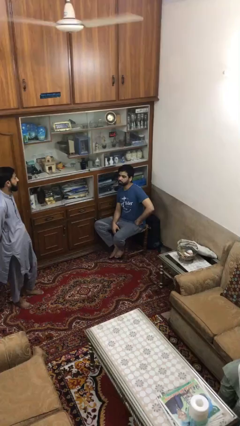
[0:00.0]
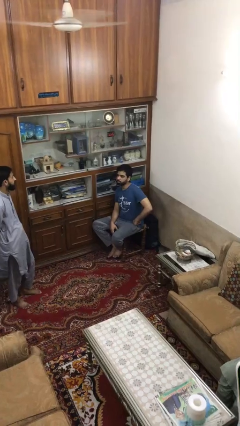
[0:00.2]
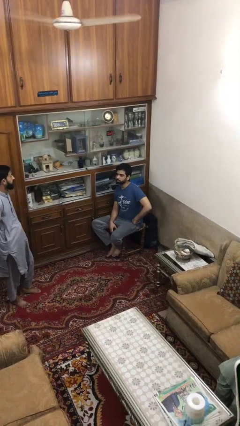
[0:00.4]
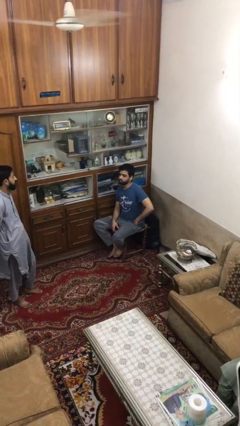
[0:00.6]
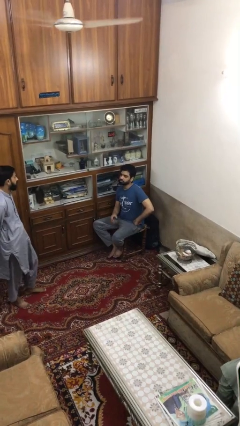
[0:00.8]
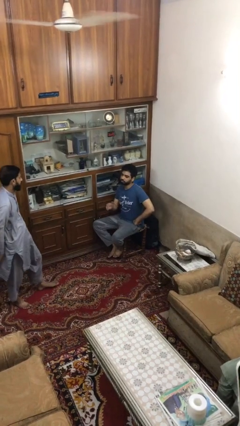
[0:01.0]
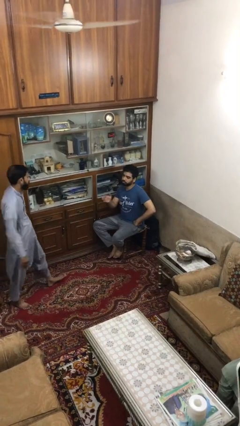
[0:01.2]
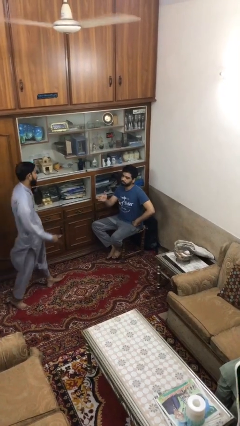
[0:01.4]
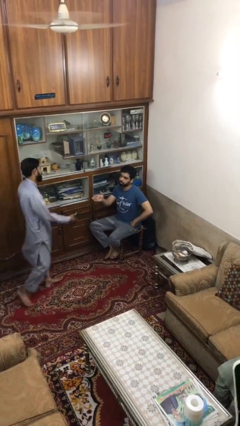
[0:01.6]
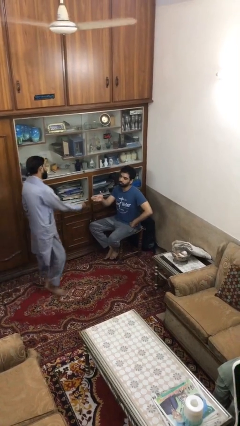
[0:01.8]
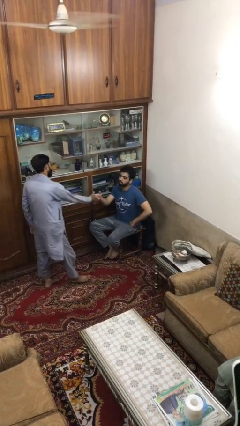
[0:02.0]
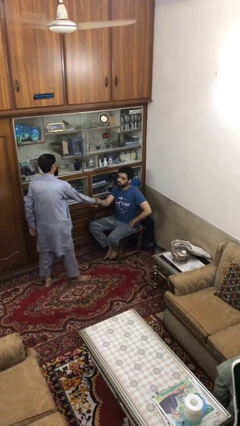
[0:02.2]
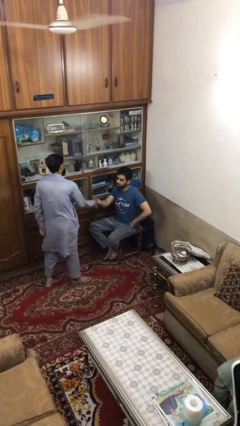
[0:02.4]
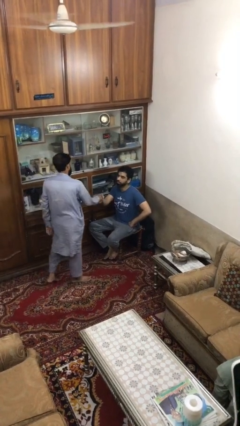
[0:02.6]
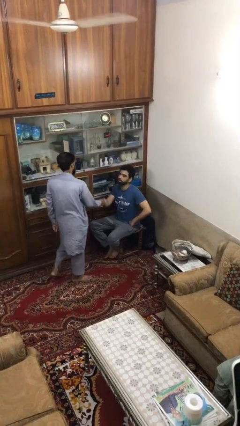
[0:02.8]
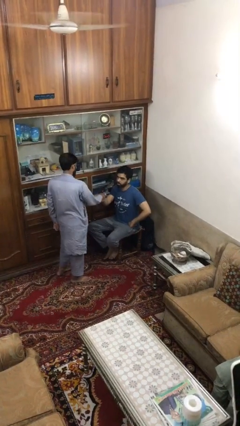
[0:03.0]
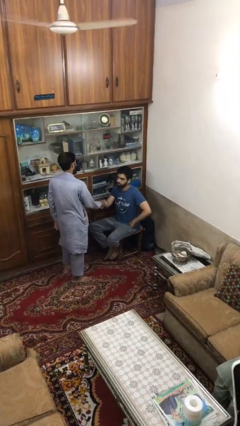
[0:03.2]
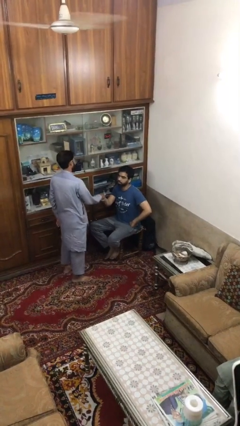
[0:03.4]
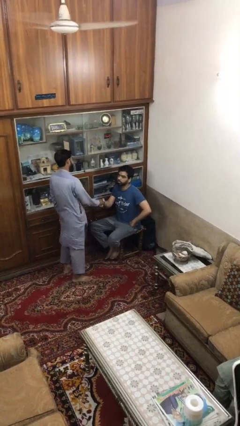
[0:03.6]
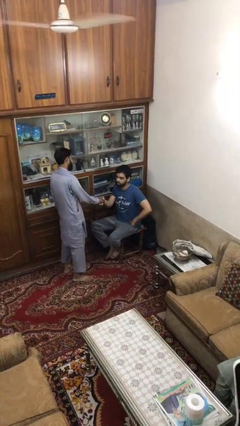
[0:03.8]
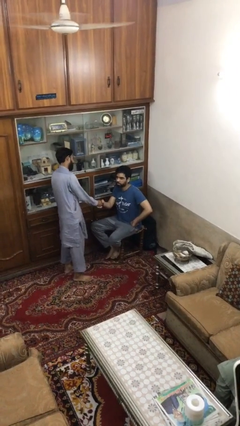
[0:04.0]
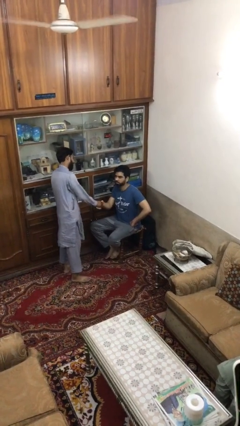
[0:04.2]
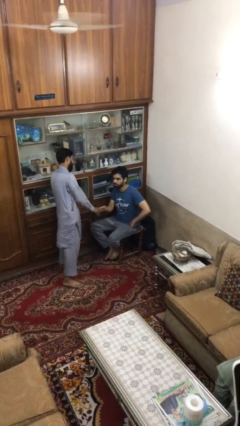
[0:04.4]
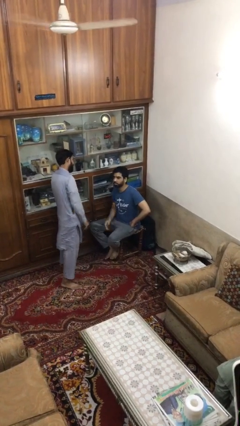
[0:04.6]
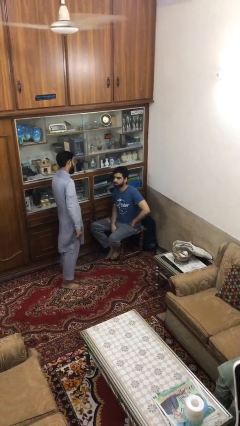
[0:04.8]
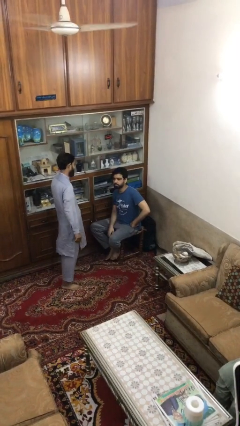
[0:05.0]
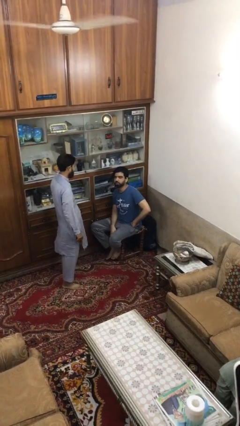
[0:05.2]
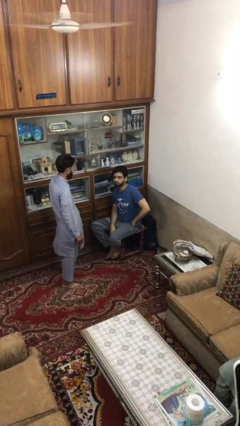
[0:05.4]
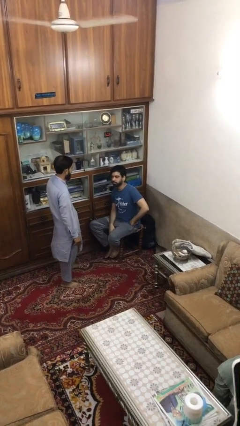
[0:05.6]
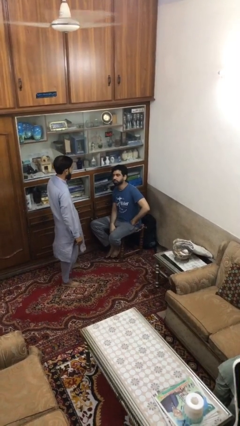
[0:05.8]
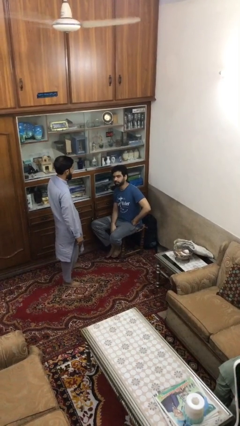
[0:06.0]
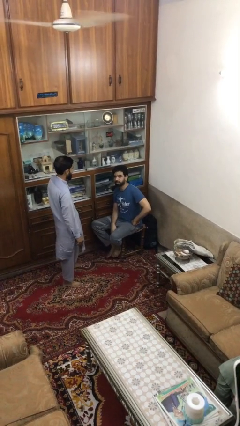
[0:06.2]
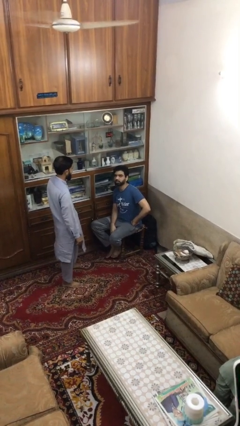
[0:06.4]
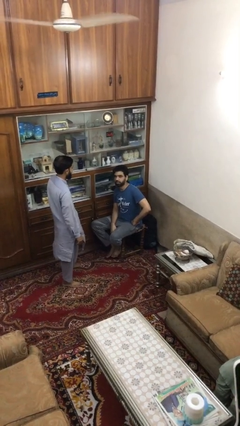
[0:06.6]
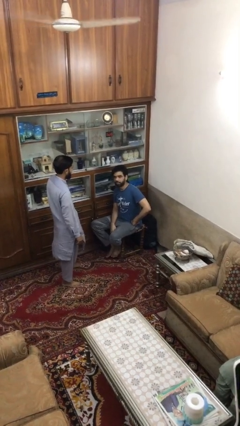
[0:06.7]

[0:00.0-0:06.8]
person shakes hand

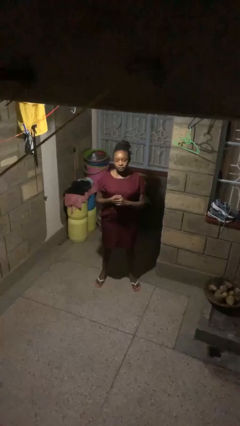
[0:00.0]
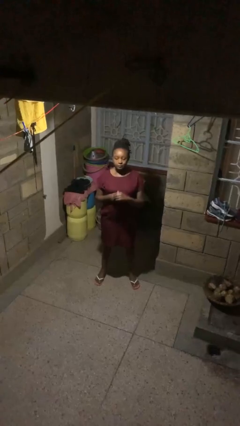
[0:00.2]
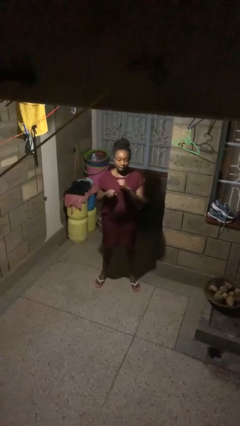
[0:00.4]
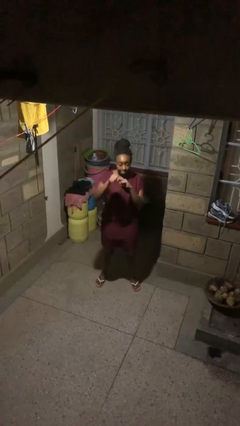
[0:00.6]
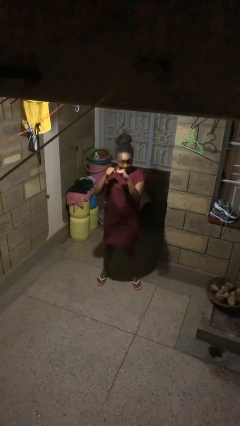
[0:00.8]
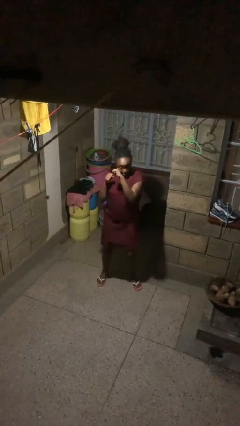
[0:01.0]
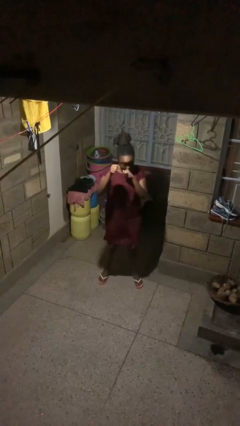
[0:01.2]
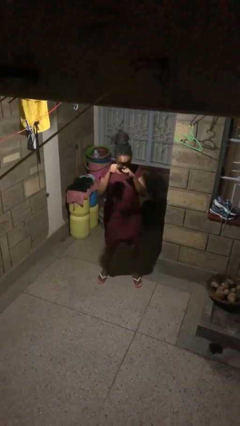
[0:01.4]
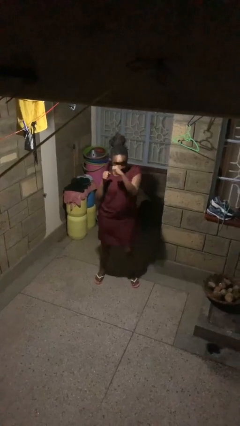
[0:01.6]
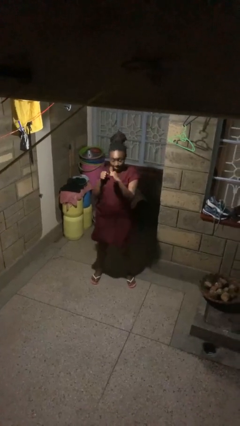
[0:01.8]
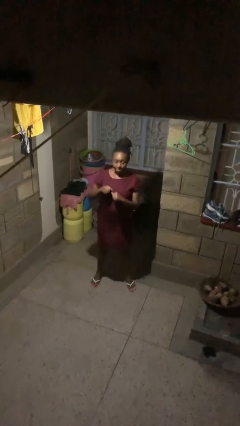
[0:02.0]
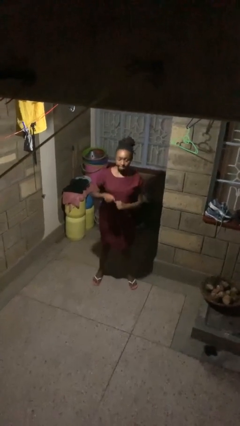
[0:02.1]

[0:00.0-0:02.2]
person punches

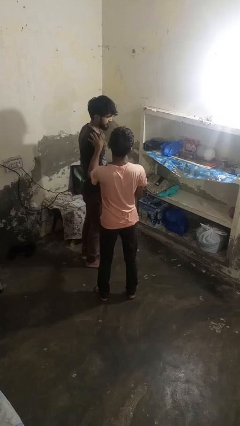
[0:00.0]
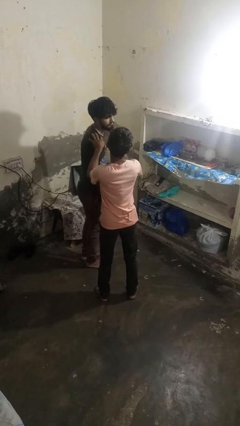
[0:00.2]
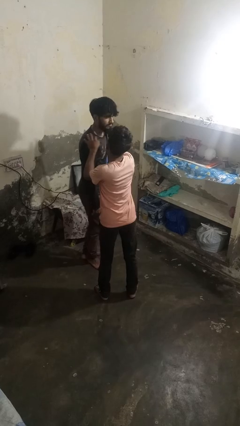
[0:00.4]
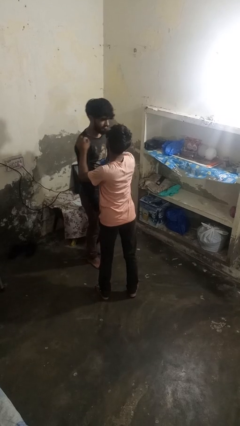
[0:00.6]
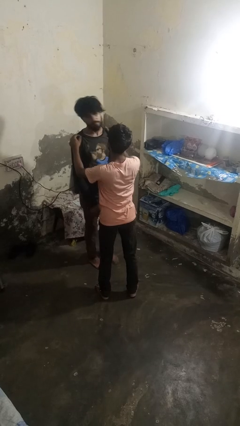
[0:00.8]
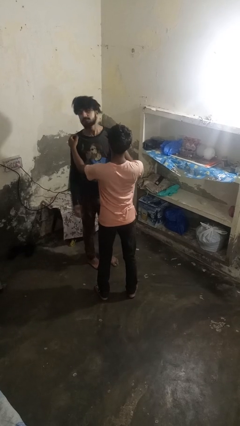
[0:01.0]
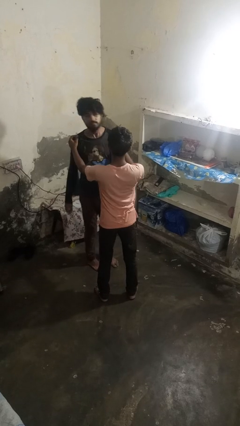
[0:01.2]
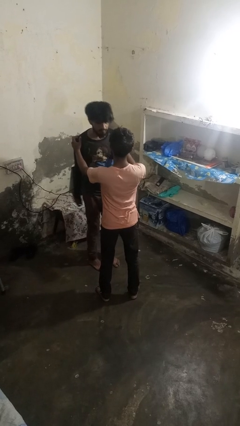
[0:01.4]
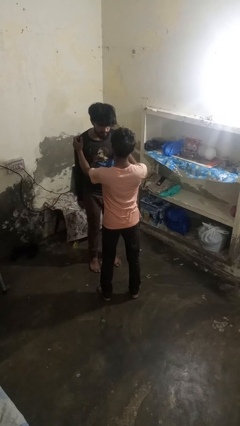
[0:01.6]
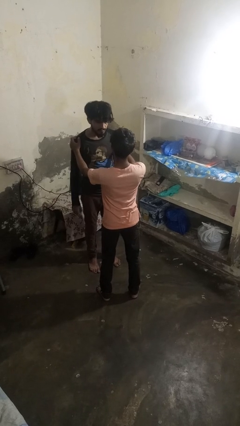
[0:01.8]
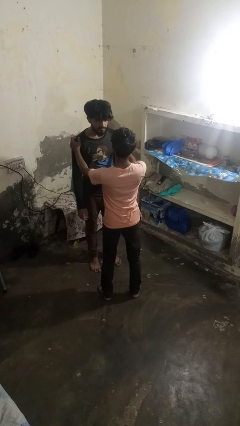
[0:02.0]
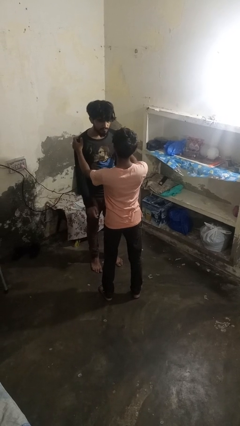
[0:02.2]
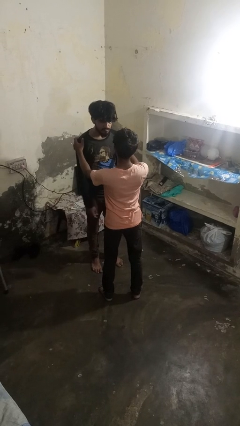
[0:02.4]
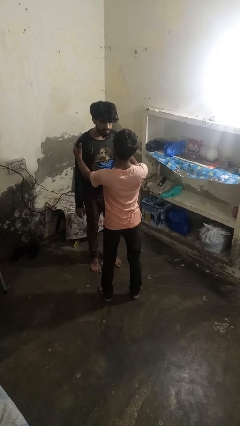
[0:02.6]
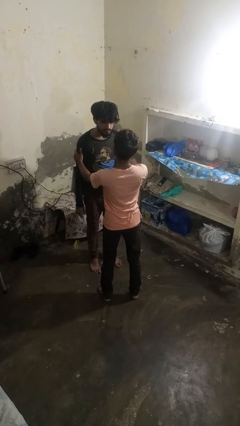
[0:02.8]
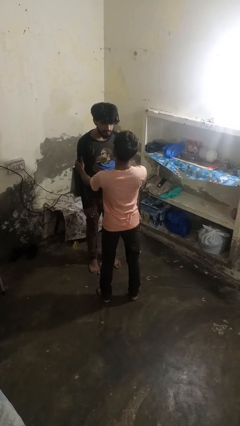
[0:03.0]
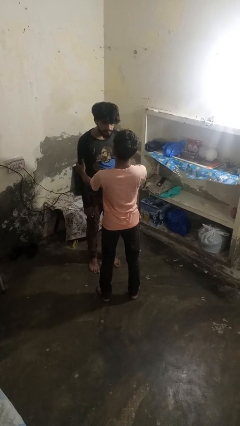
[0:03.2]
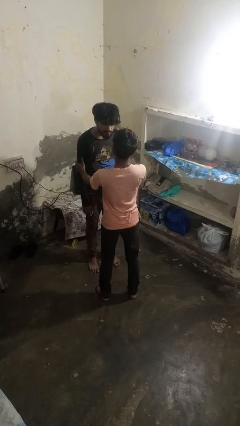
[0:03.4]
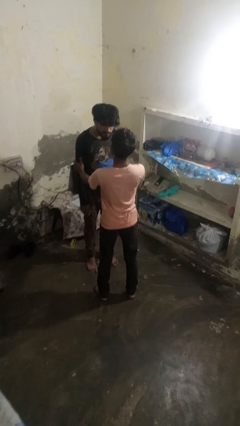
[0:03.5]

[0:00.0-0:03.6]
person spins person around

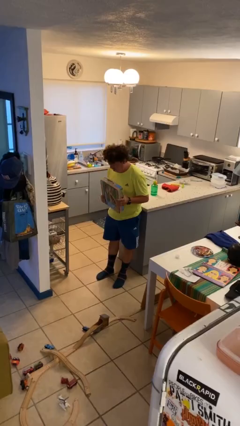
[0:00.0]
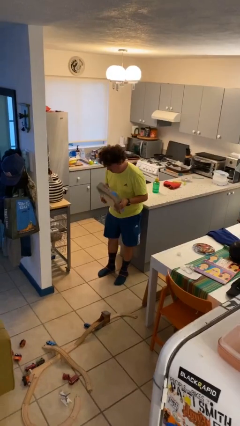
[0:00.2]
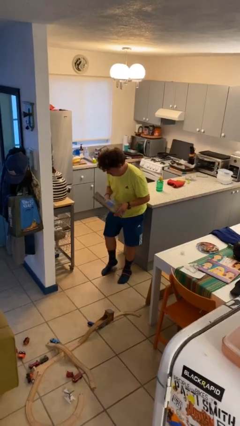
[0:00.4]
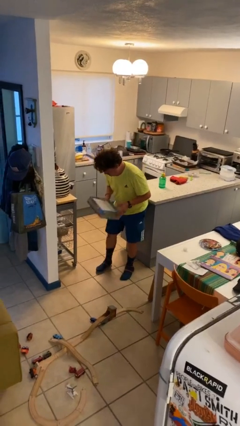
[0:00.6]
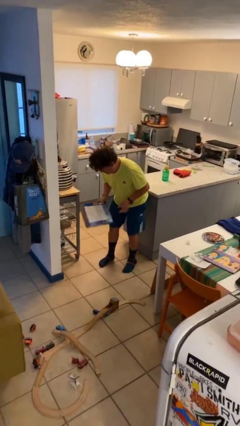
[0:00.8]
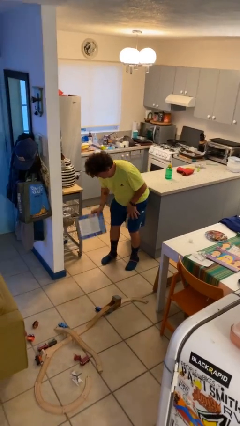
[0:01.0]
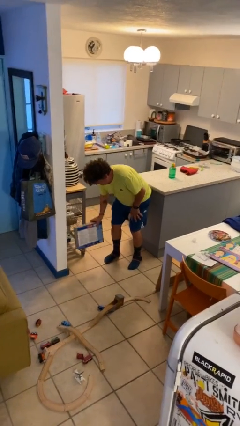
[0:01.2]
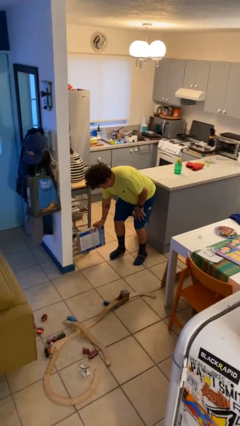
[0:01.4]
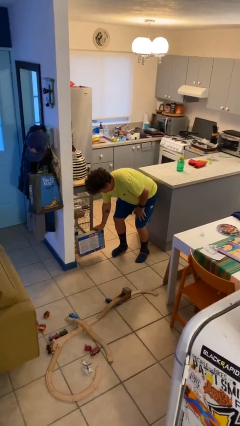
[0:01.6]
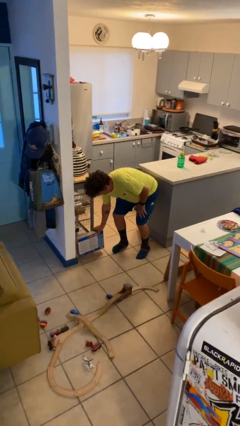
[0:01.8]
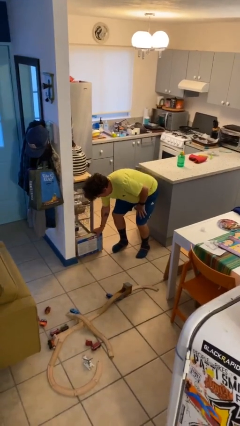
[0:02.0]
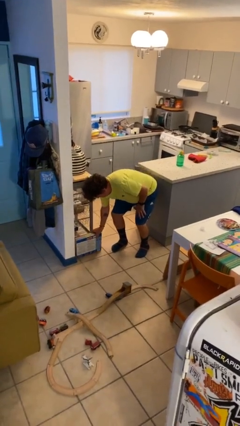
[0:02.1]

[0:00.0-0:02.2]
person puts down object on floor

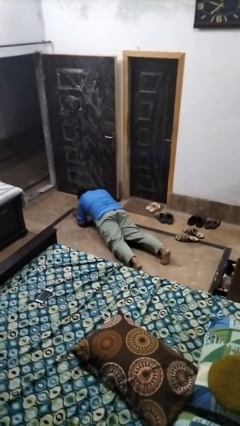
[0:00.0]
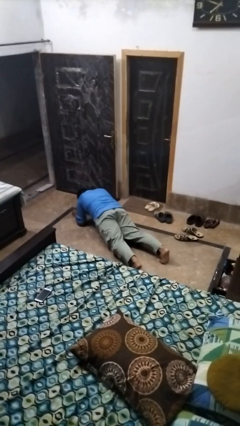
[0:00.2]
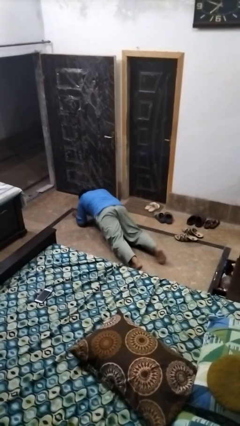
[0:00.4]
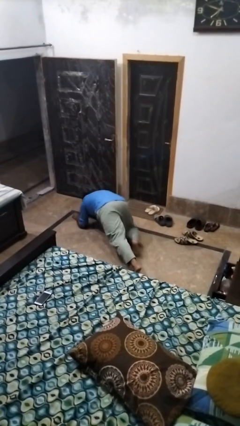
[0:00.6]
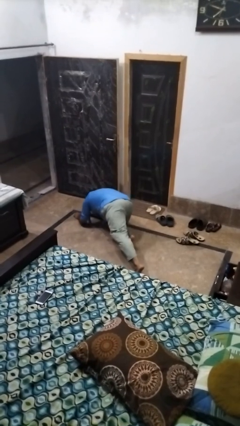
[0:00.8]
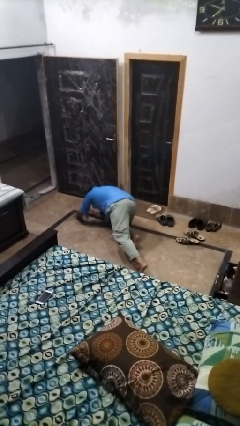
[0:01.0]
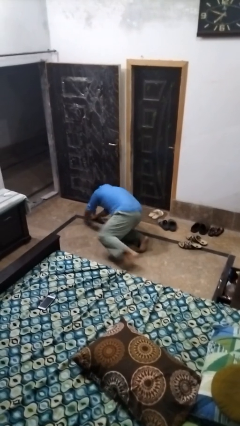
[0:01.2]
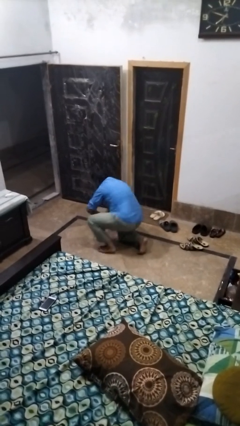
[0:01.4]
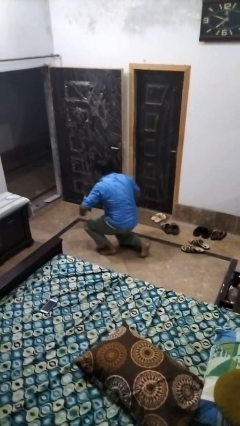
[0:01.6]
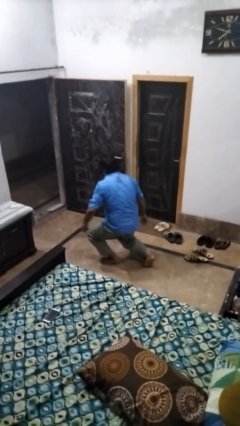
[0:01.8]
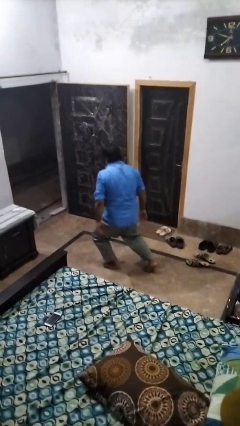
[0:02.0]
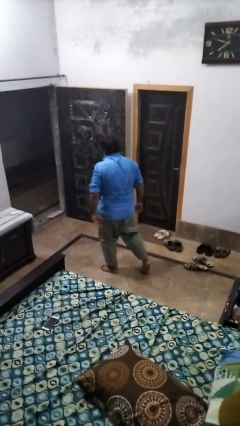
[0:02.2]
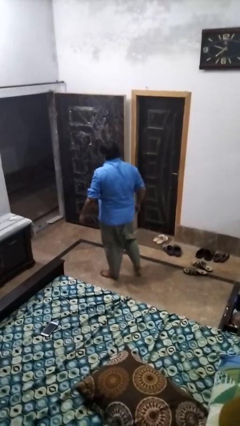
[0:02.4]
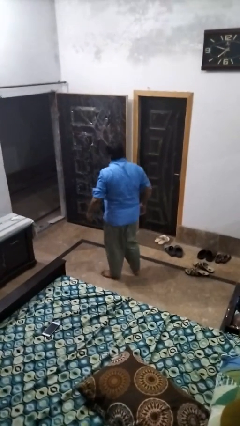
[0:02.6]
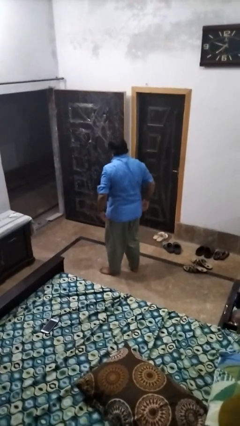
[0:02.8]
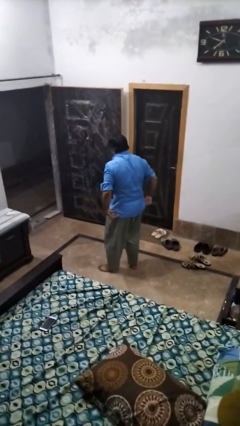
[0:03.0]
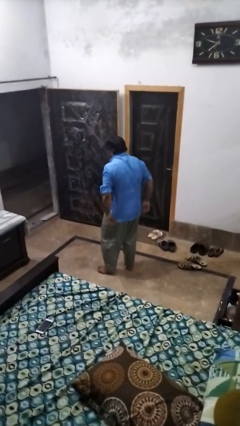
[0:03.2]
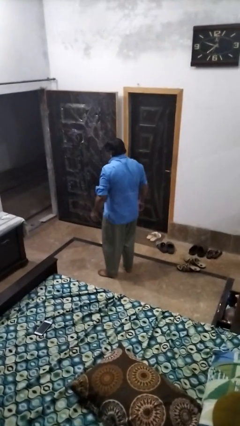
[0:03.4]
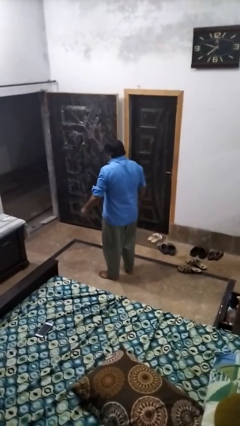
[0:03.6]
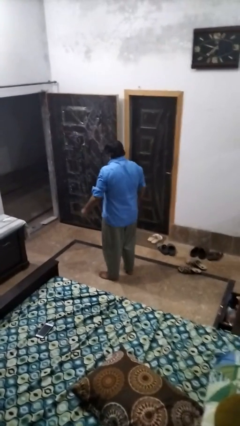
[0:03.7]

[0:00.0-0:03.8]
person stands up from floor
